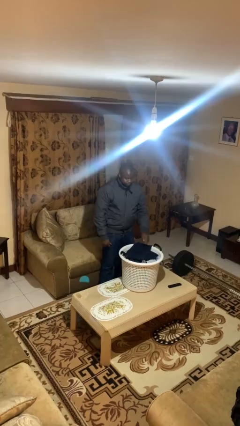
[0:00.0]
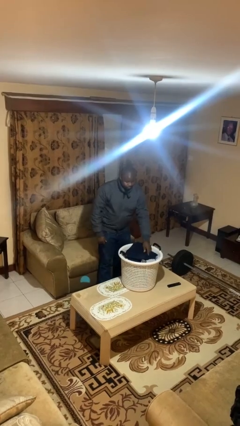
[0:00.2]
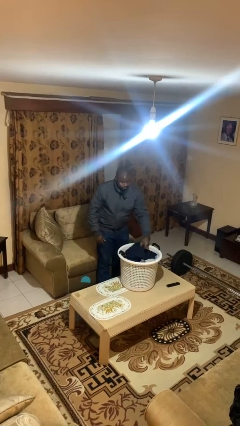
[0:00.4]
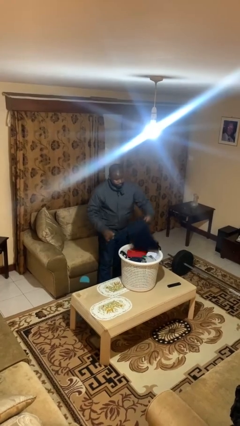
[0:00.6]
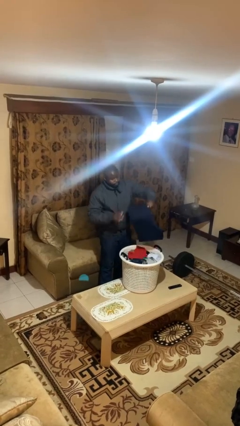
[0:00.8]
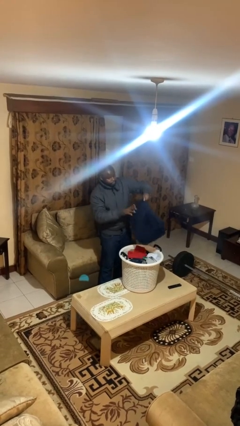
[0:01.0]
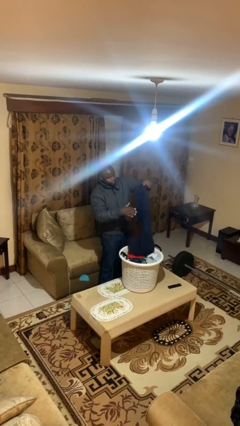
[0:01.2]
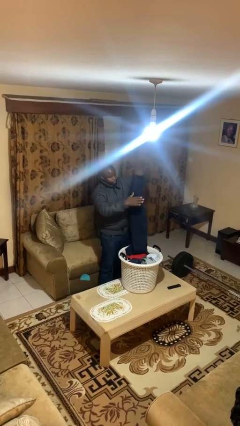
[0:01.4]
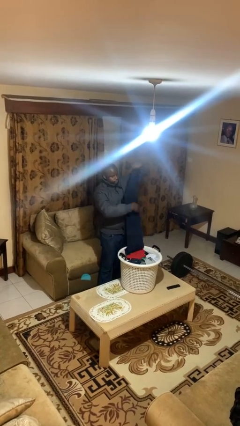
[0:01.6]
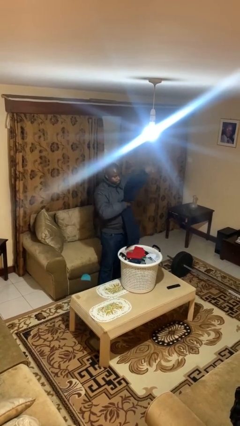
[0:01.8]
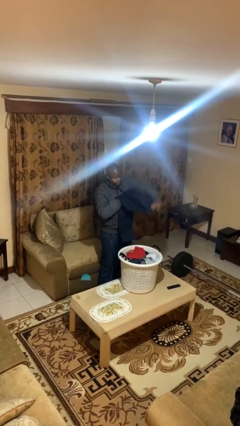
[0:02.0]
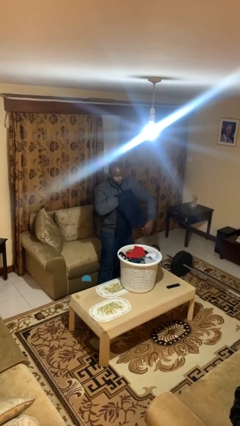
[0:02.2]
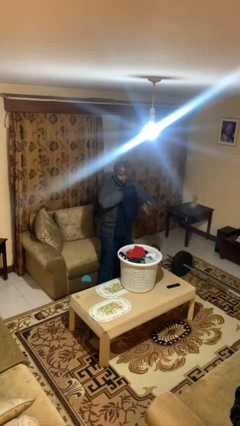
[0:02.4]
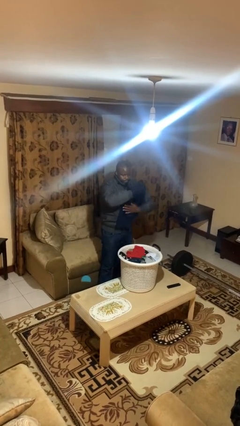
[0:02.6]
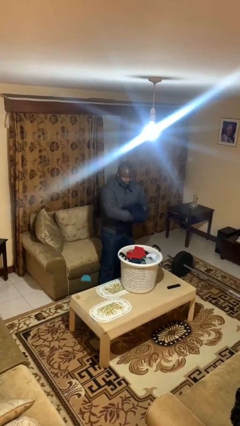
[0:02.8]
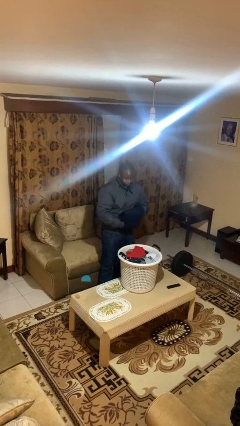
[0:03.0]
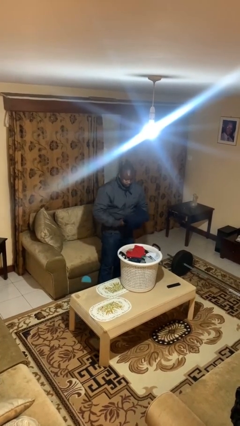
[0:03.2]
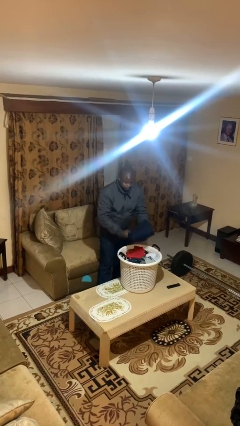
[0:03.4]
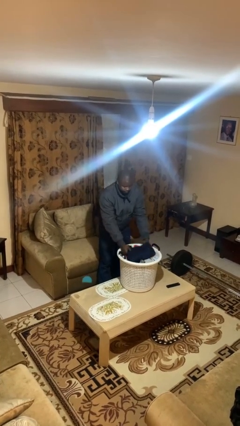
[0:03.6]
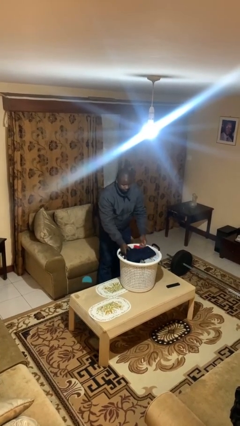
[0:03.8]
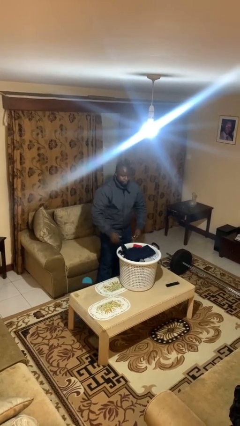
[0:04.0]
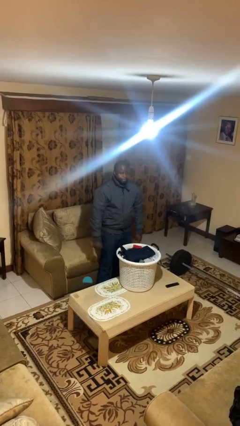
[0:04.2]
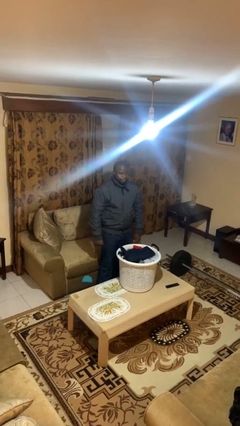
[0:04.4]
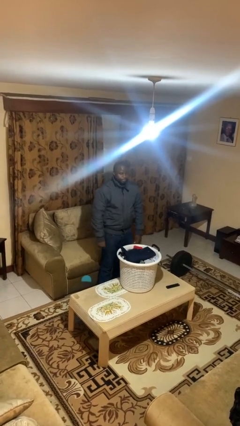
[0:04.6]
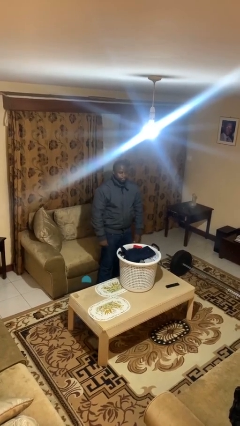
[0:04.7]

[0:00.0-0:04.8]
person folds pants

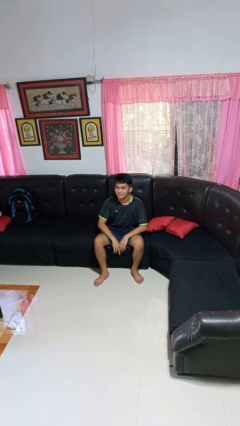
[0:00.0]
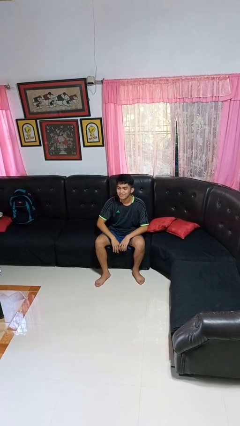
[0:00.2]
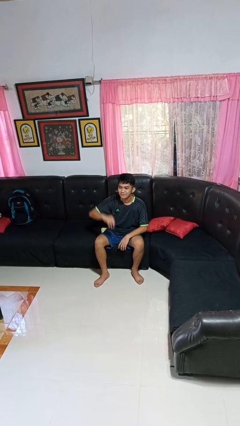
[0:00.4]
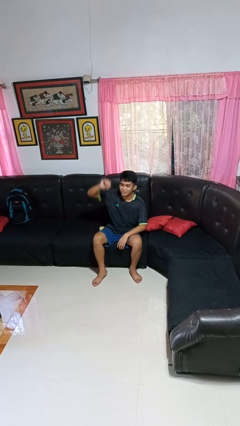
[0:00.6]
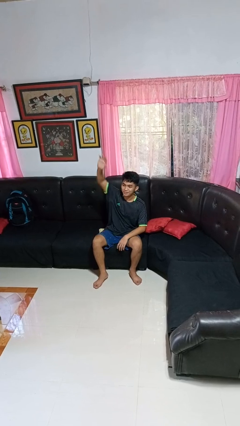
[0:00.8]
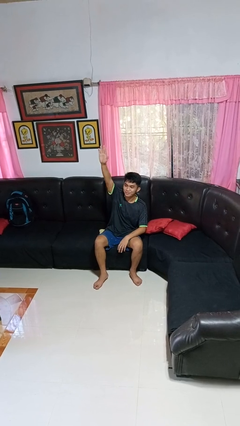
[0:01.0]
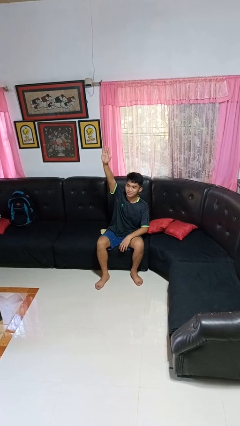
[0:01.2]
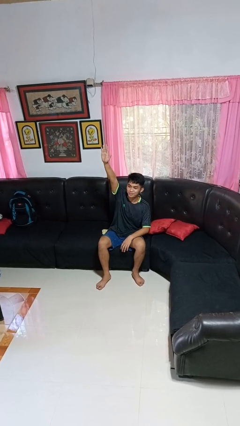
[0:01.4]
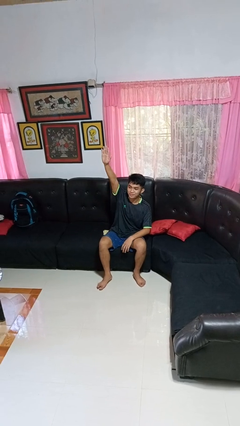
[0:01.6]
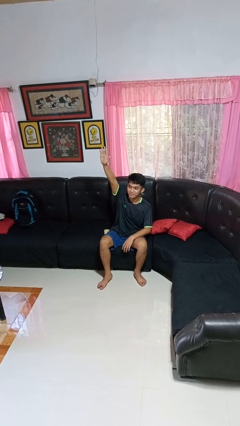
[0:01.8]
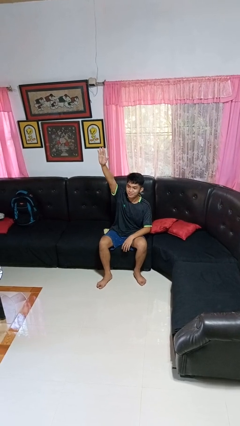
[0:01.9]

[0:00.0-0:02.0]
person gestures raise hand

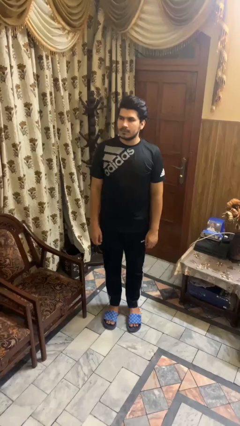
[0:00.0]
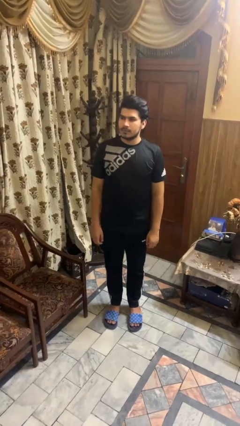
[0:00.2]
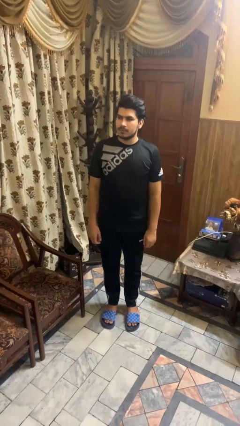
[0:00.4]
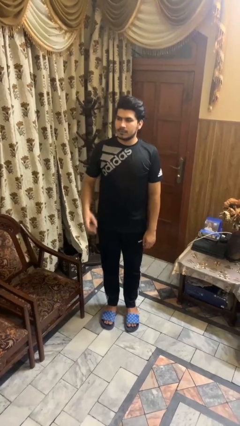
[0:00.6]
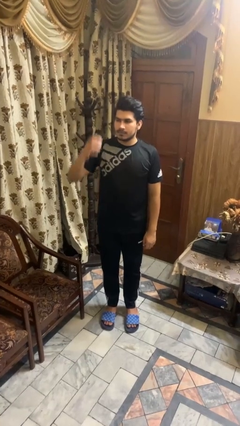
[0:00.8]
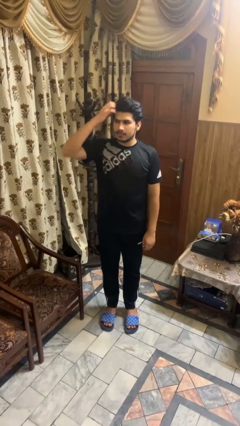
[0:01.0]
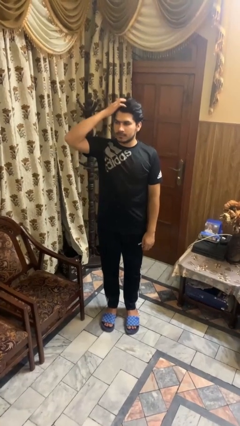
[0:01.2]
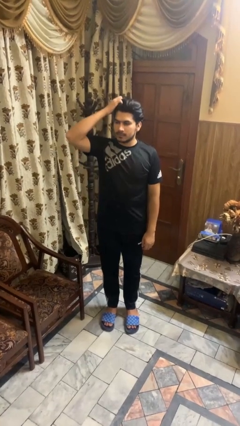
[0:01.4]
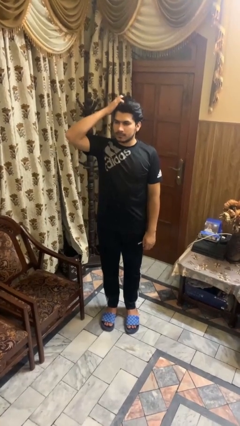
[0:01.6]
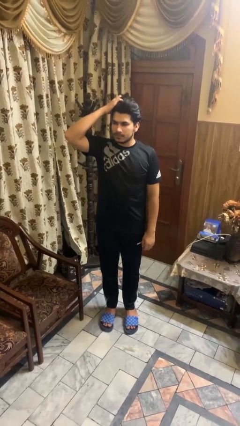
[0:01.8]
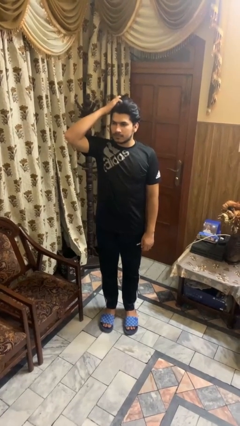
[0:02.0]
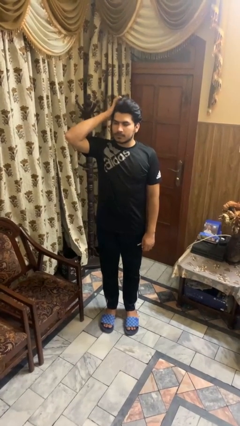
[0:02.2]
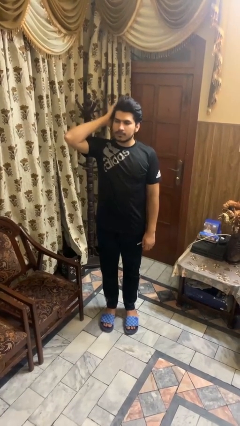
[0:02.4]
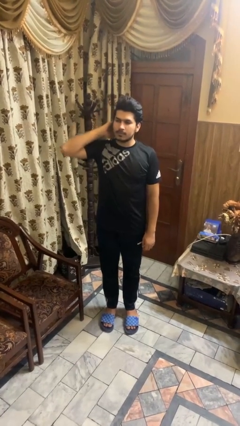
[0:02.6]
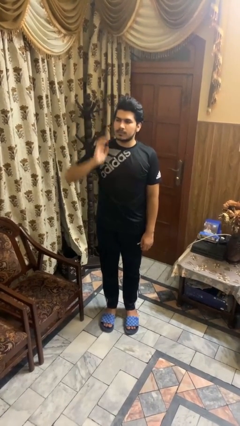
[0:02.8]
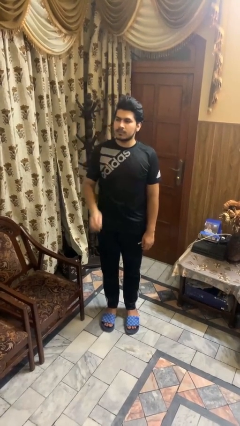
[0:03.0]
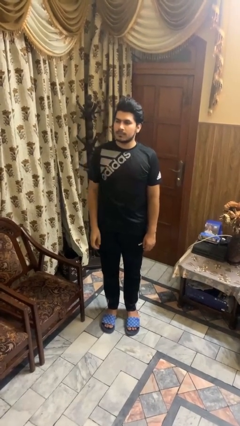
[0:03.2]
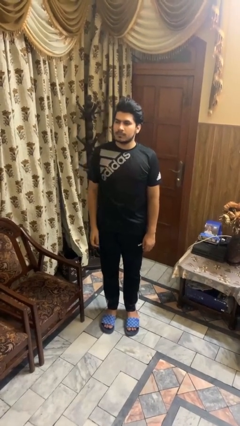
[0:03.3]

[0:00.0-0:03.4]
person scratches face

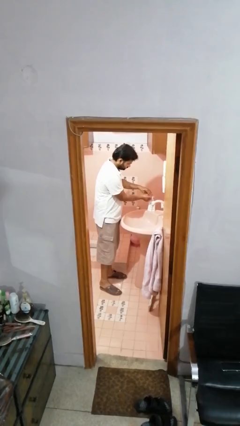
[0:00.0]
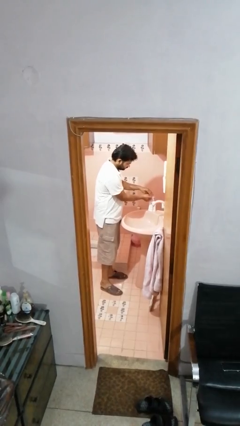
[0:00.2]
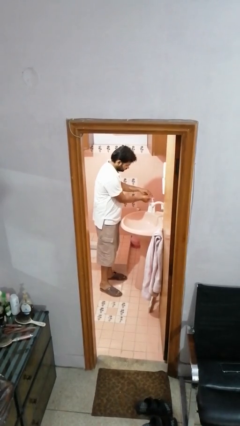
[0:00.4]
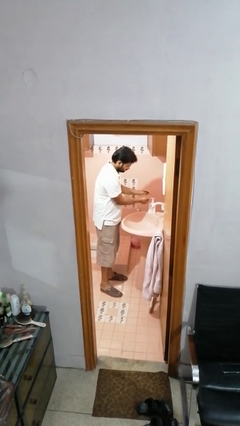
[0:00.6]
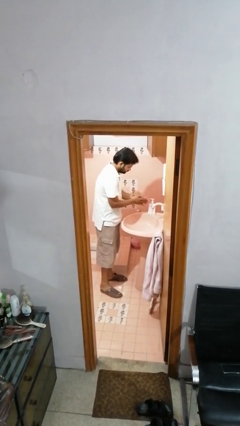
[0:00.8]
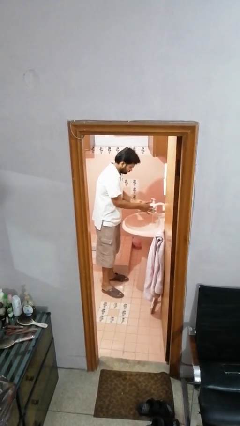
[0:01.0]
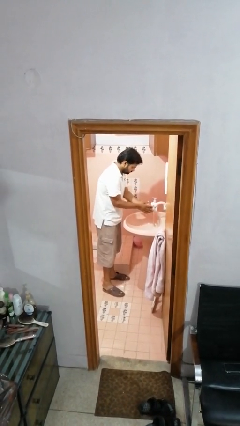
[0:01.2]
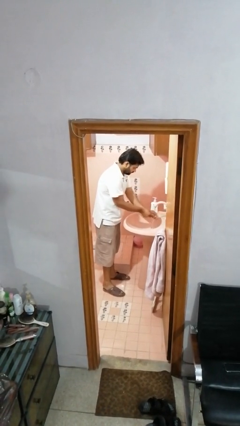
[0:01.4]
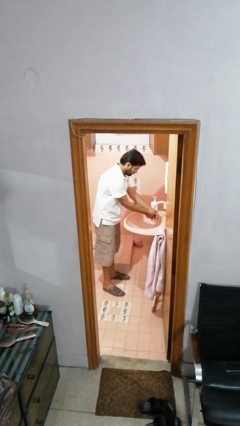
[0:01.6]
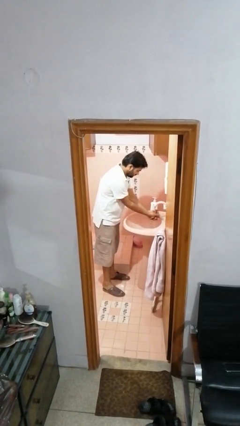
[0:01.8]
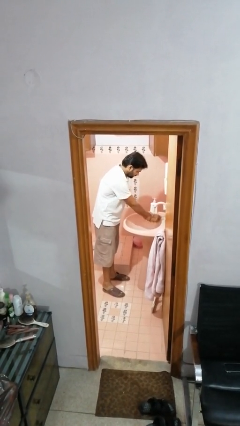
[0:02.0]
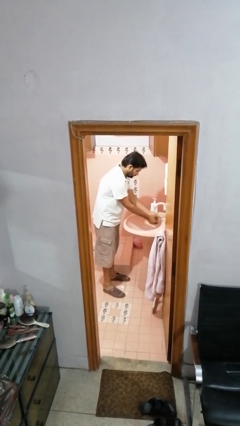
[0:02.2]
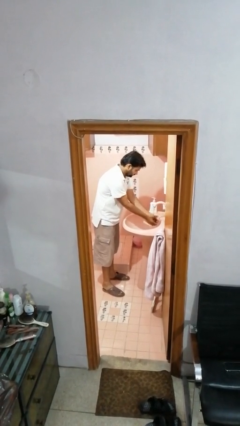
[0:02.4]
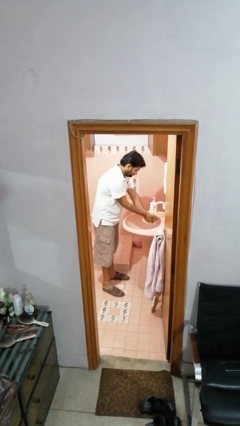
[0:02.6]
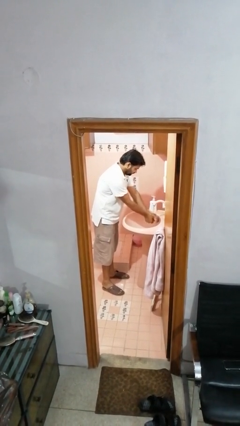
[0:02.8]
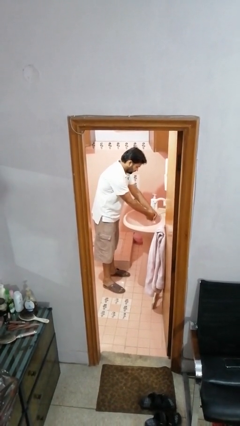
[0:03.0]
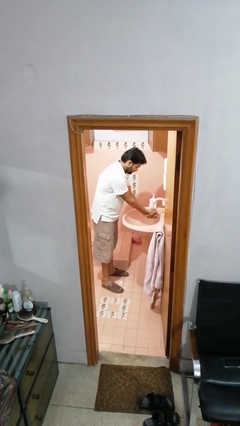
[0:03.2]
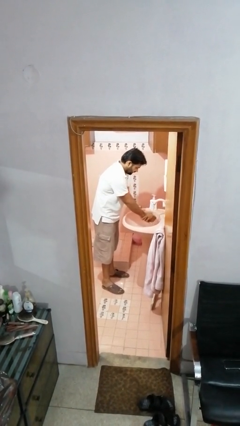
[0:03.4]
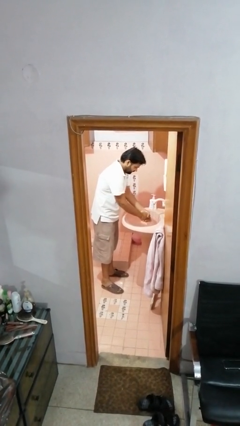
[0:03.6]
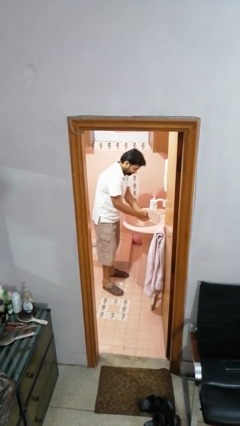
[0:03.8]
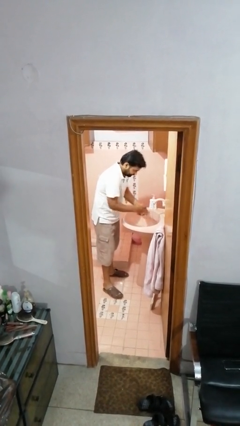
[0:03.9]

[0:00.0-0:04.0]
person washes hands

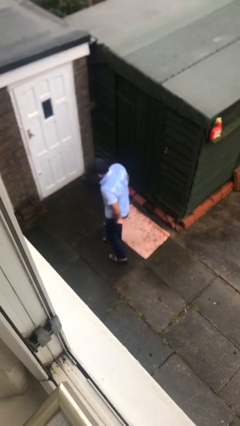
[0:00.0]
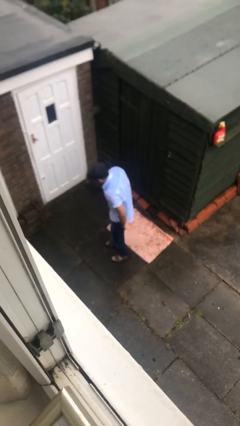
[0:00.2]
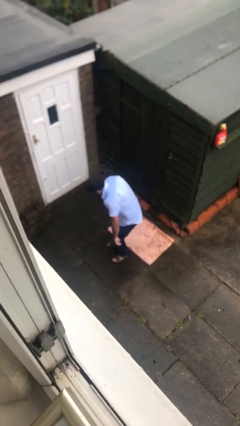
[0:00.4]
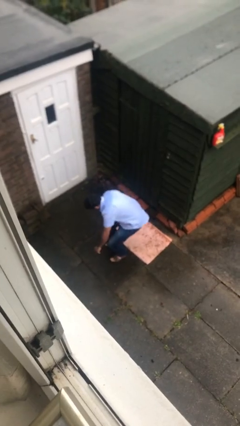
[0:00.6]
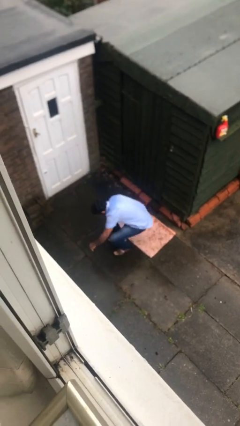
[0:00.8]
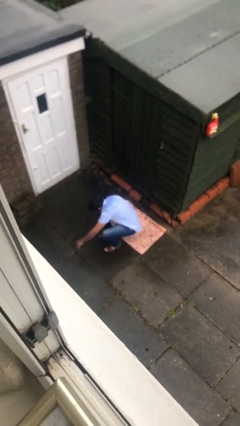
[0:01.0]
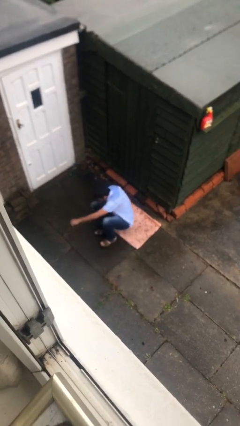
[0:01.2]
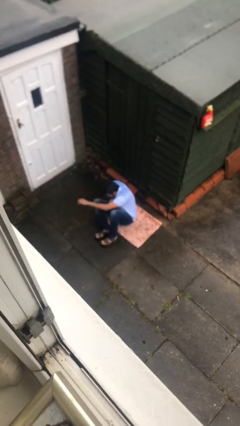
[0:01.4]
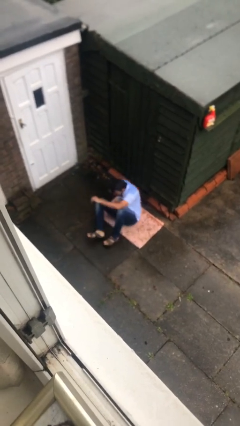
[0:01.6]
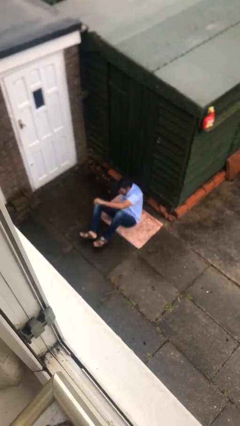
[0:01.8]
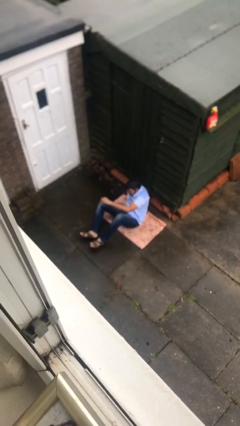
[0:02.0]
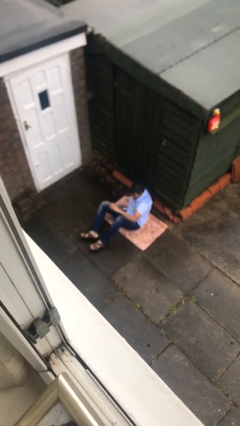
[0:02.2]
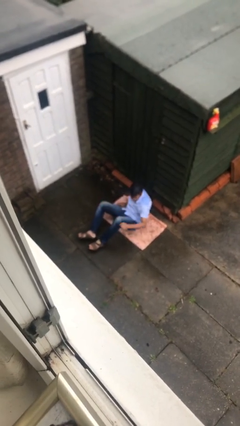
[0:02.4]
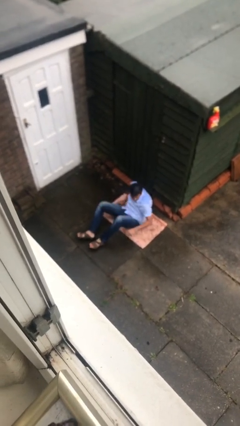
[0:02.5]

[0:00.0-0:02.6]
person sits down

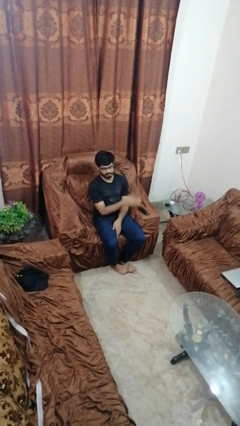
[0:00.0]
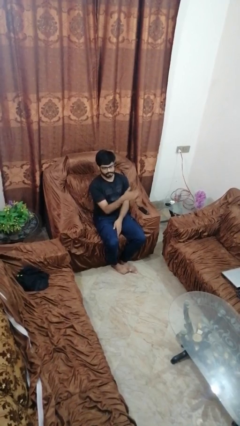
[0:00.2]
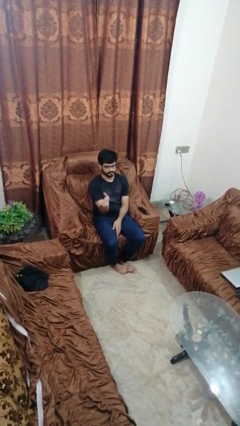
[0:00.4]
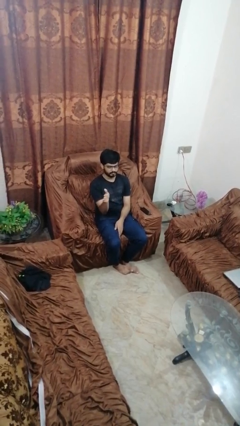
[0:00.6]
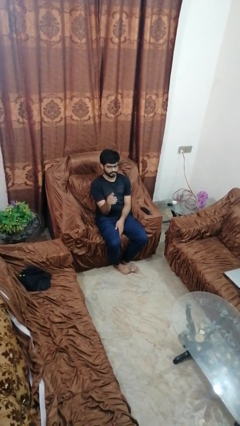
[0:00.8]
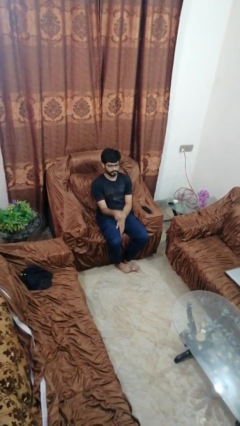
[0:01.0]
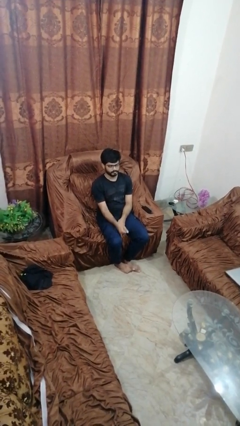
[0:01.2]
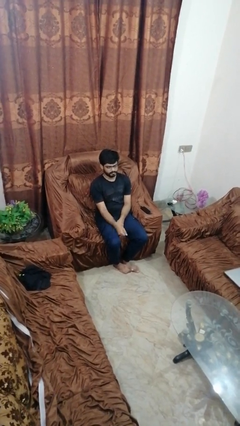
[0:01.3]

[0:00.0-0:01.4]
person gestures swipe right
